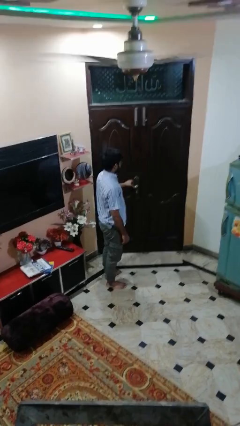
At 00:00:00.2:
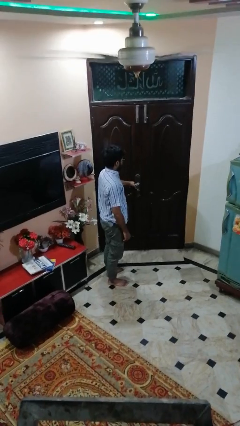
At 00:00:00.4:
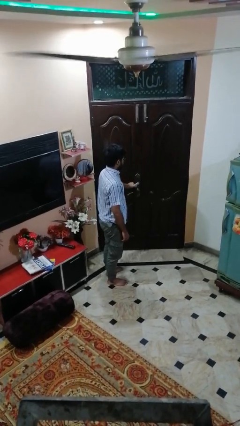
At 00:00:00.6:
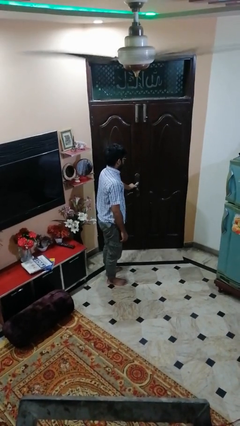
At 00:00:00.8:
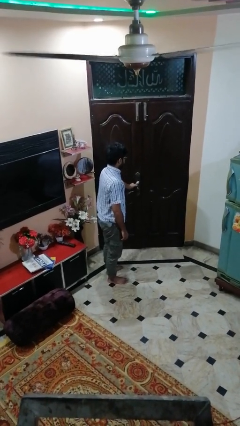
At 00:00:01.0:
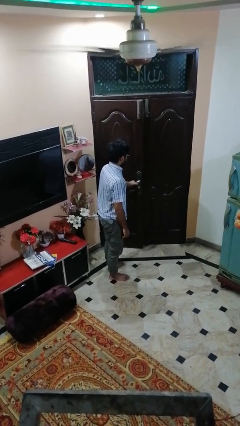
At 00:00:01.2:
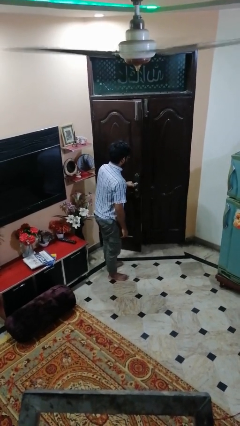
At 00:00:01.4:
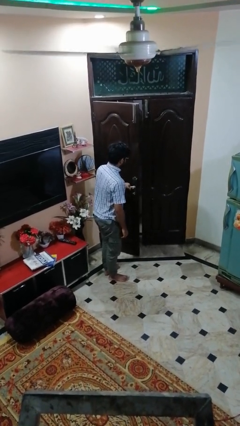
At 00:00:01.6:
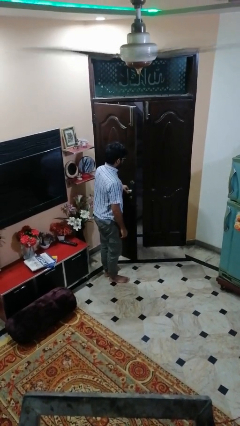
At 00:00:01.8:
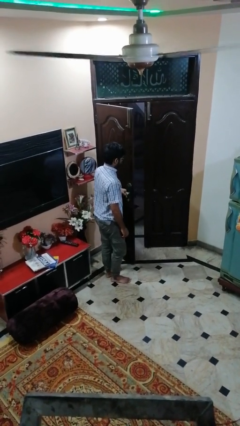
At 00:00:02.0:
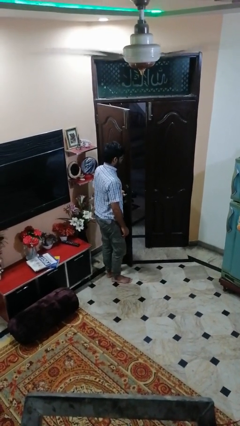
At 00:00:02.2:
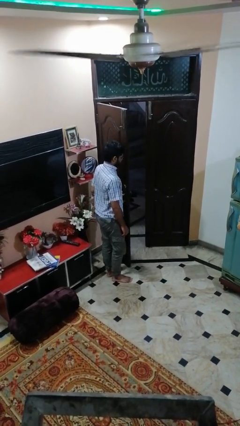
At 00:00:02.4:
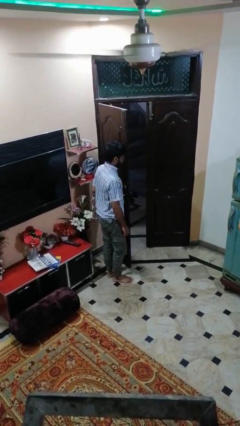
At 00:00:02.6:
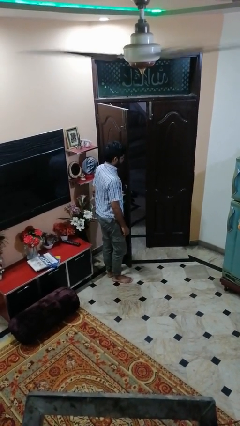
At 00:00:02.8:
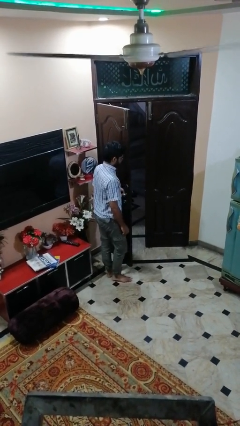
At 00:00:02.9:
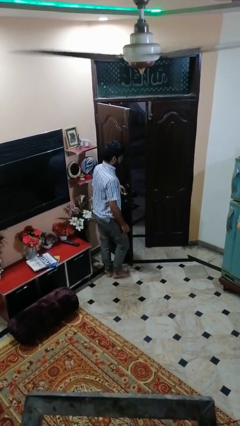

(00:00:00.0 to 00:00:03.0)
person opens facility door

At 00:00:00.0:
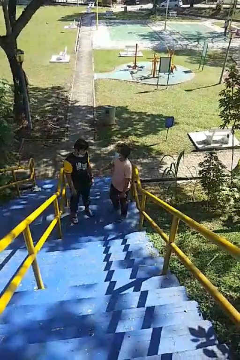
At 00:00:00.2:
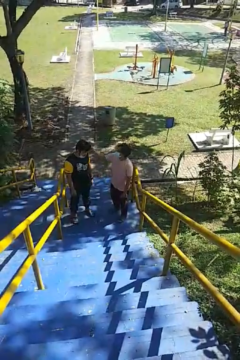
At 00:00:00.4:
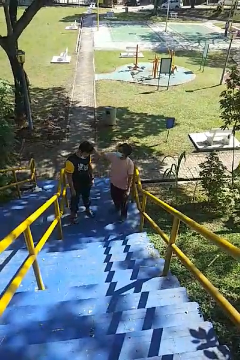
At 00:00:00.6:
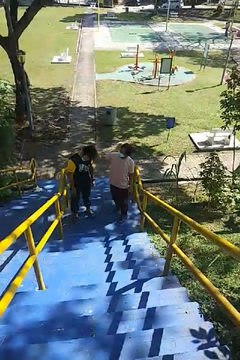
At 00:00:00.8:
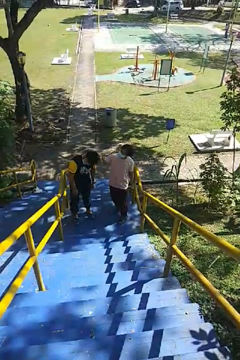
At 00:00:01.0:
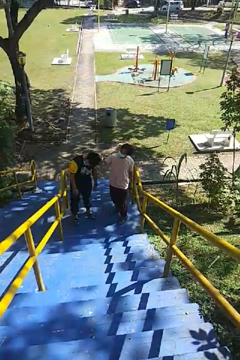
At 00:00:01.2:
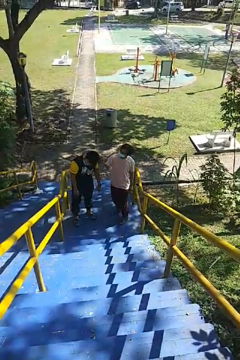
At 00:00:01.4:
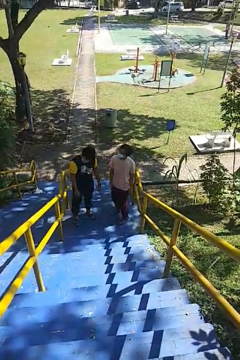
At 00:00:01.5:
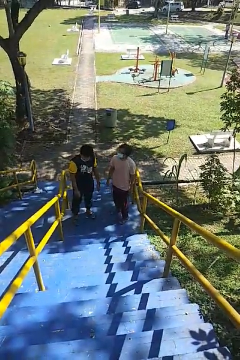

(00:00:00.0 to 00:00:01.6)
person grabs person by hair

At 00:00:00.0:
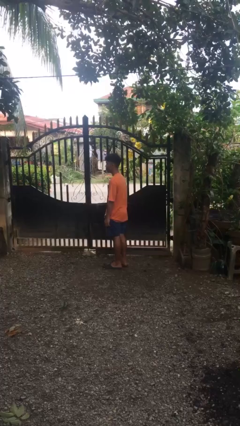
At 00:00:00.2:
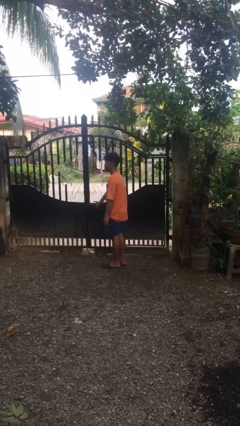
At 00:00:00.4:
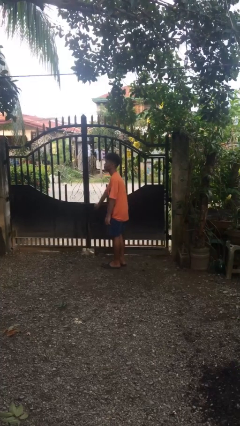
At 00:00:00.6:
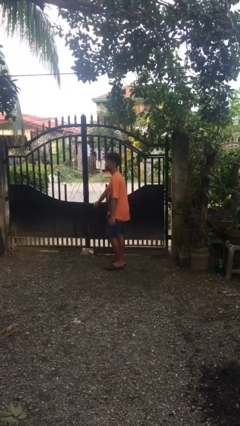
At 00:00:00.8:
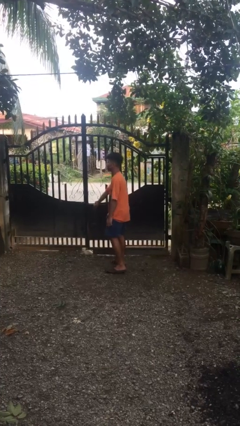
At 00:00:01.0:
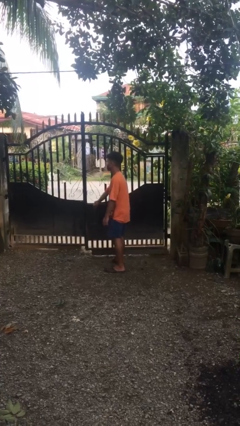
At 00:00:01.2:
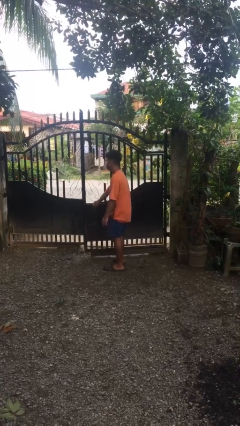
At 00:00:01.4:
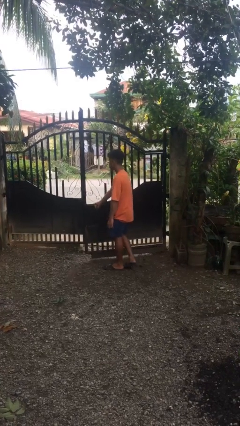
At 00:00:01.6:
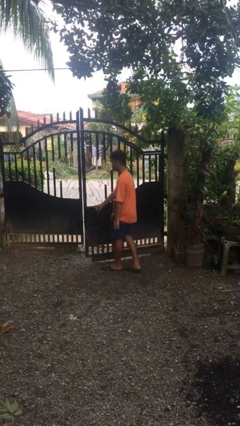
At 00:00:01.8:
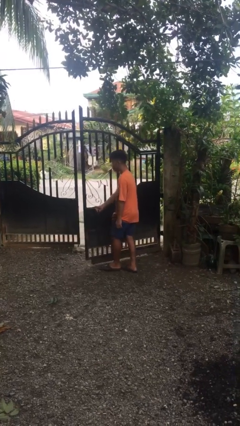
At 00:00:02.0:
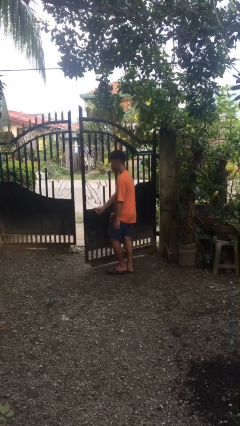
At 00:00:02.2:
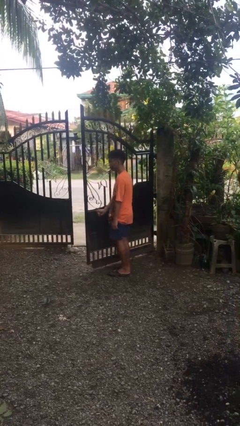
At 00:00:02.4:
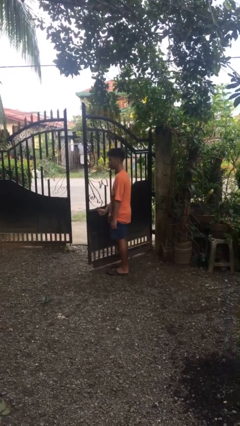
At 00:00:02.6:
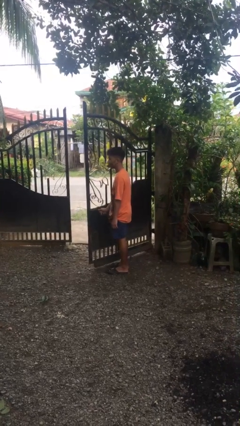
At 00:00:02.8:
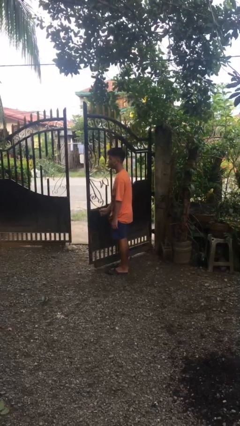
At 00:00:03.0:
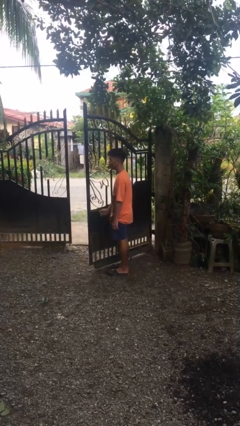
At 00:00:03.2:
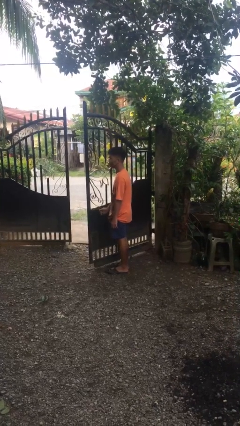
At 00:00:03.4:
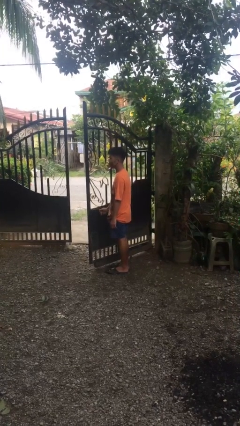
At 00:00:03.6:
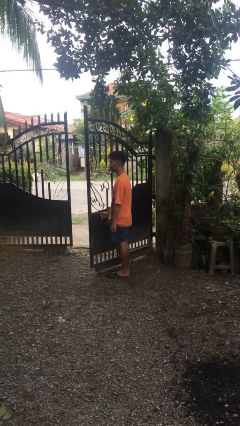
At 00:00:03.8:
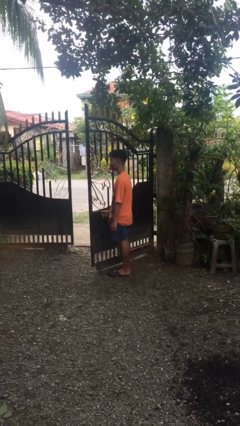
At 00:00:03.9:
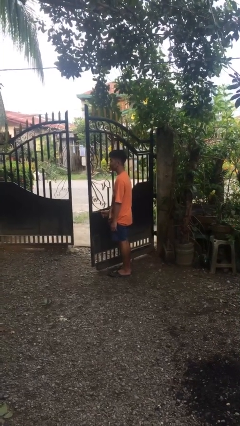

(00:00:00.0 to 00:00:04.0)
person opens gate

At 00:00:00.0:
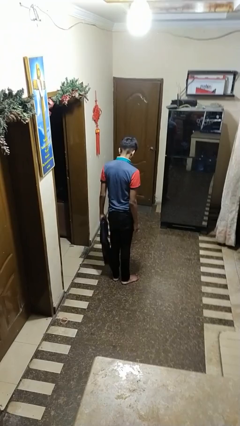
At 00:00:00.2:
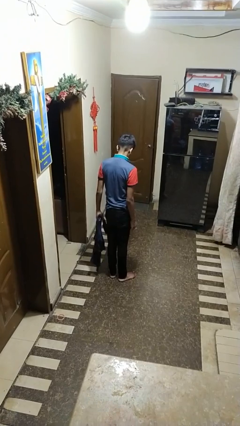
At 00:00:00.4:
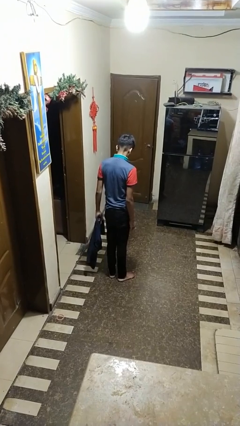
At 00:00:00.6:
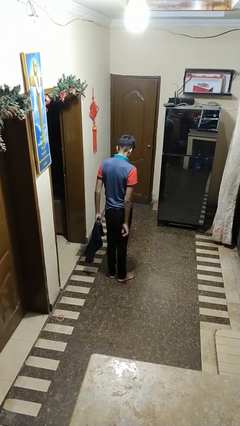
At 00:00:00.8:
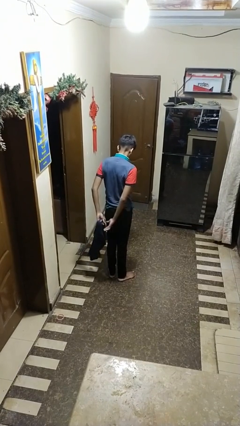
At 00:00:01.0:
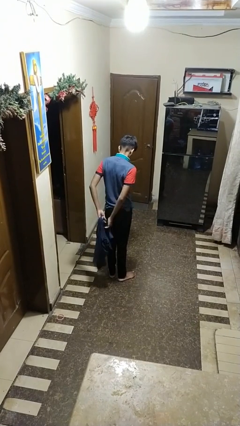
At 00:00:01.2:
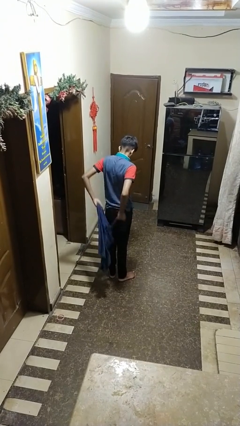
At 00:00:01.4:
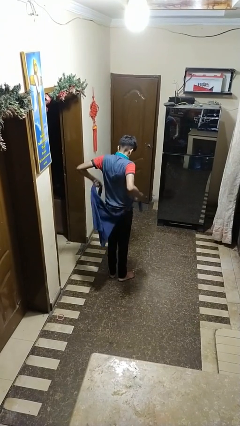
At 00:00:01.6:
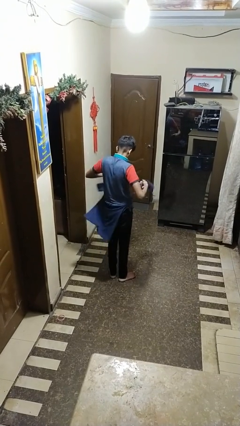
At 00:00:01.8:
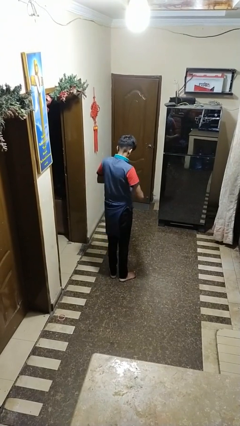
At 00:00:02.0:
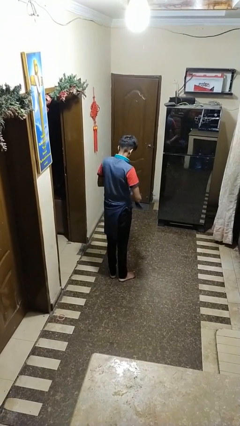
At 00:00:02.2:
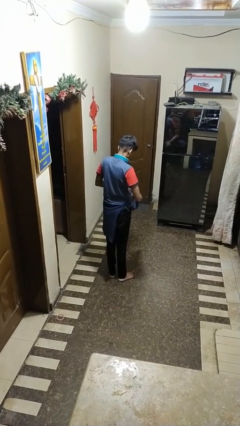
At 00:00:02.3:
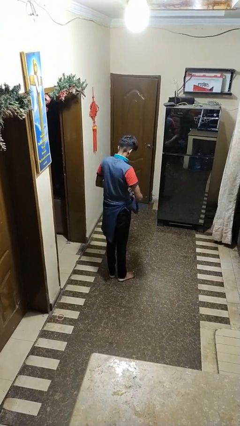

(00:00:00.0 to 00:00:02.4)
person ties jacket around waist

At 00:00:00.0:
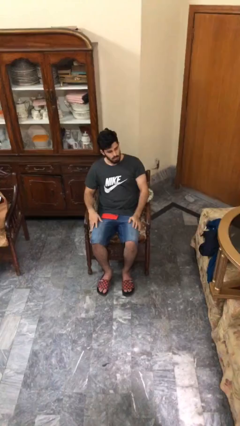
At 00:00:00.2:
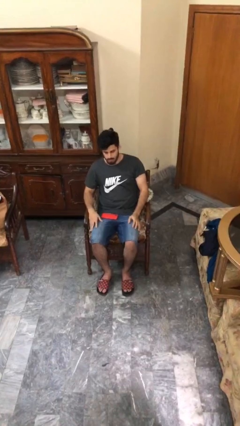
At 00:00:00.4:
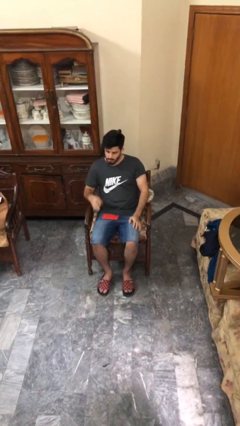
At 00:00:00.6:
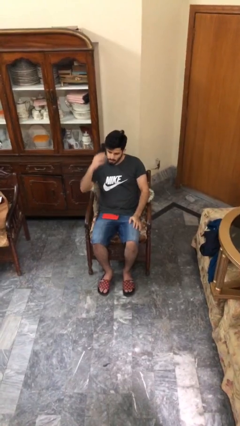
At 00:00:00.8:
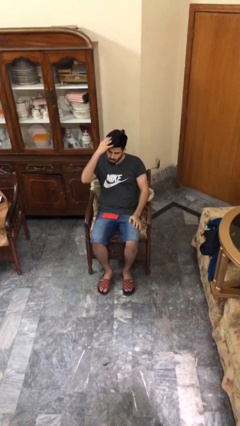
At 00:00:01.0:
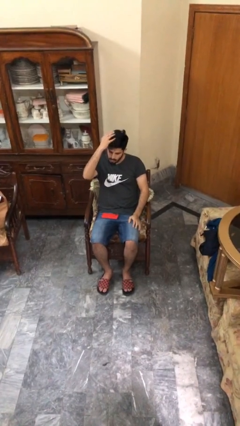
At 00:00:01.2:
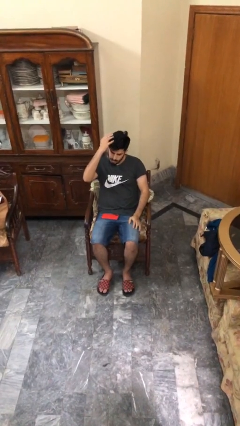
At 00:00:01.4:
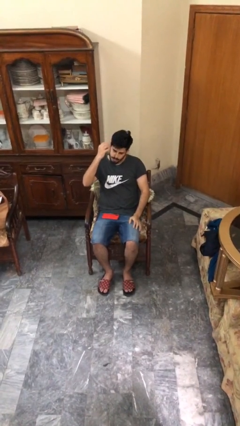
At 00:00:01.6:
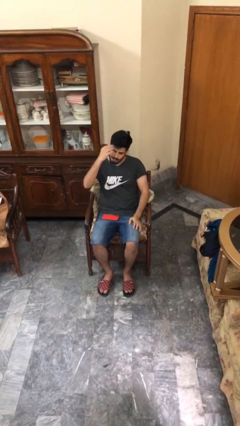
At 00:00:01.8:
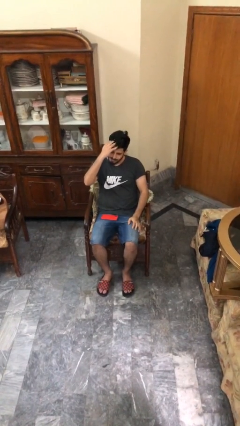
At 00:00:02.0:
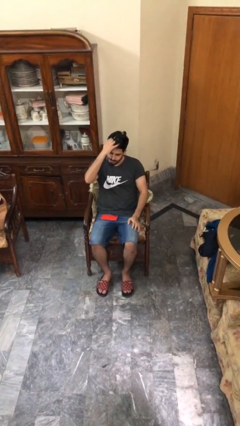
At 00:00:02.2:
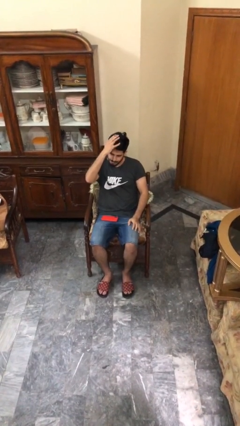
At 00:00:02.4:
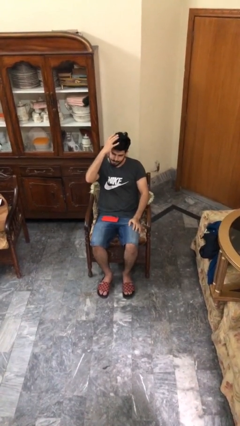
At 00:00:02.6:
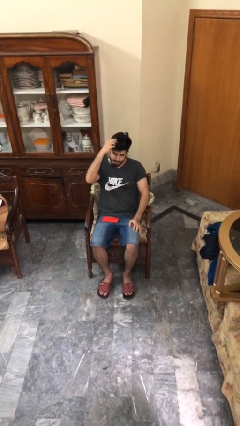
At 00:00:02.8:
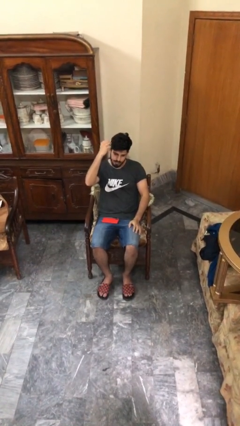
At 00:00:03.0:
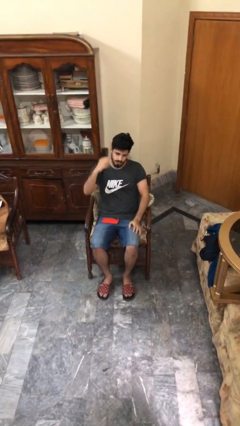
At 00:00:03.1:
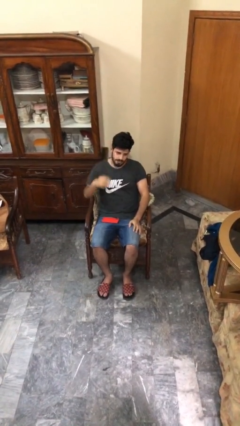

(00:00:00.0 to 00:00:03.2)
person strokes hair

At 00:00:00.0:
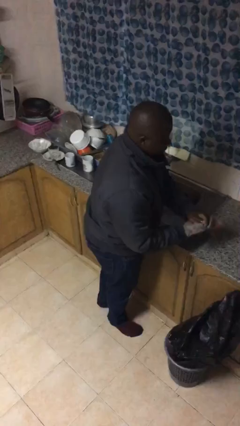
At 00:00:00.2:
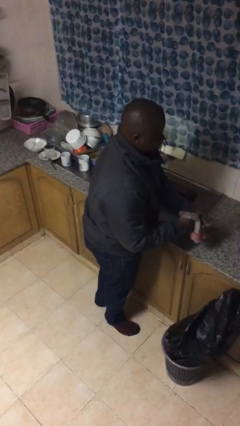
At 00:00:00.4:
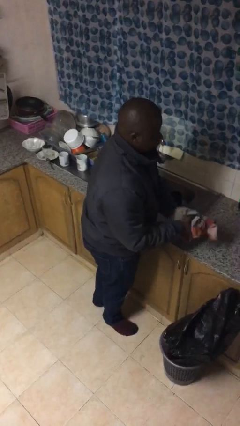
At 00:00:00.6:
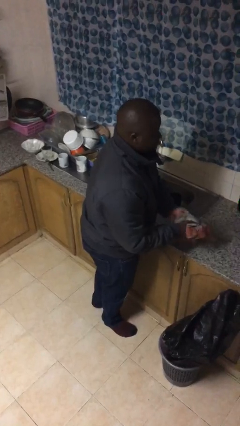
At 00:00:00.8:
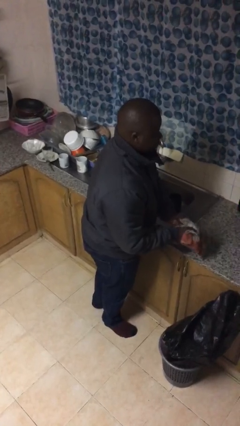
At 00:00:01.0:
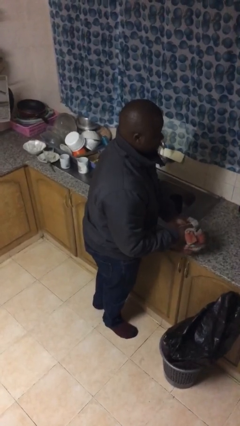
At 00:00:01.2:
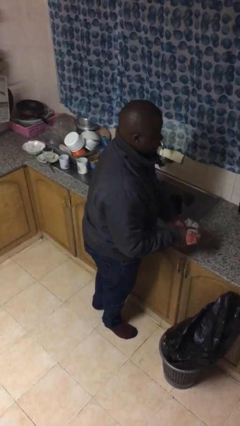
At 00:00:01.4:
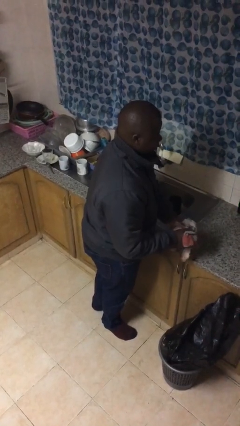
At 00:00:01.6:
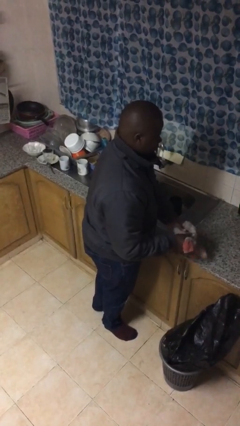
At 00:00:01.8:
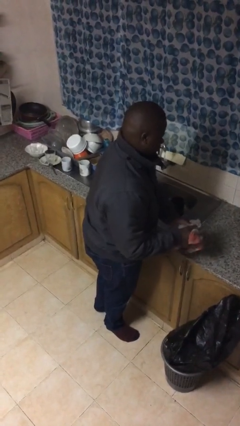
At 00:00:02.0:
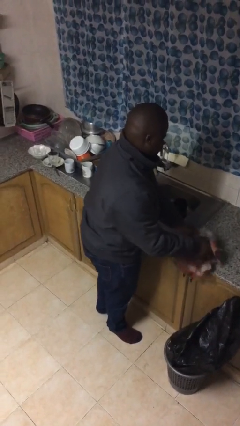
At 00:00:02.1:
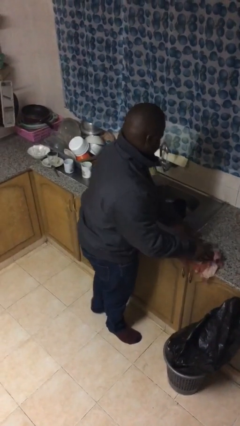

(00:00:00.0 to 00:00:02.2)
person dries hands with towel

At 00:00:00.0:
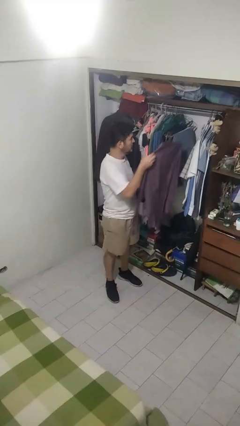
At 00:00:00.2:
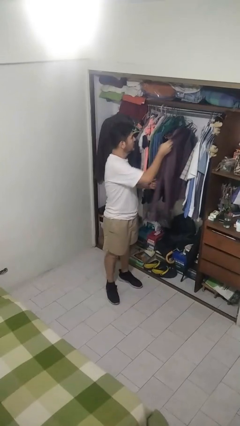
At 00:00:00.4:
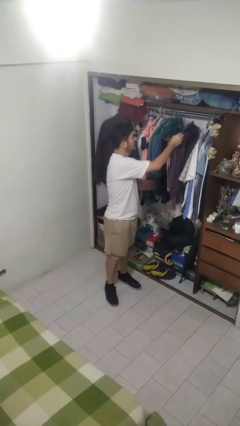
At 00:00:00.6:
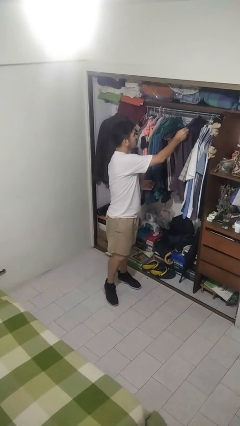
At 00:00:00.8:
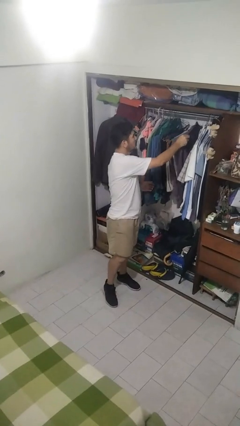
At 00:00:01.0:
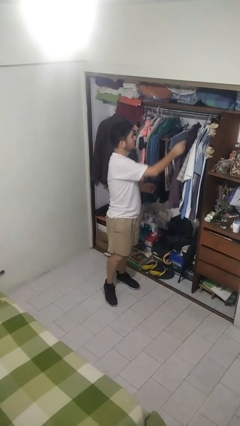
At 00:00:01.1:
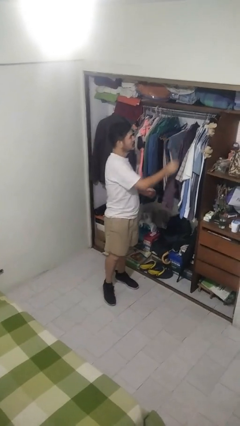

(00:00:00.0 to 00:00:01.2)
person puts clothes into closet
